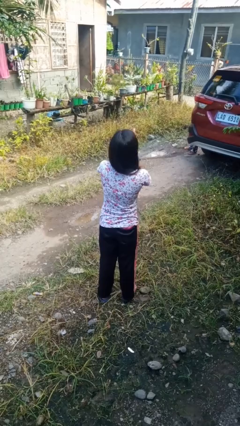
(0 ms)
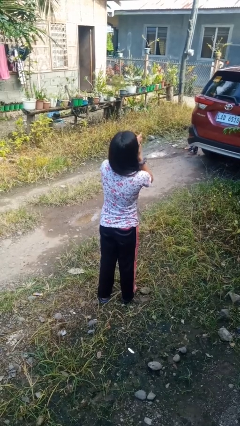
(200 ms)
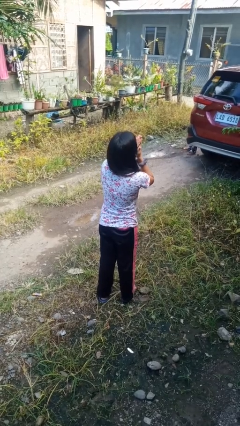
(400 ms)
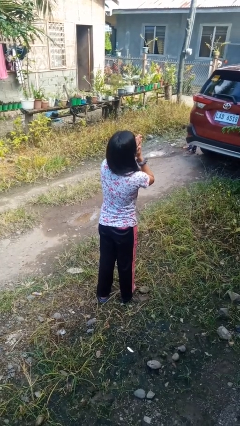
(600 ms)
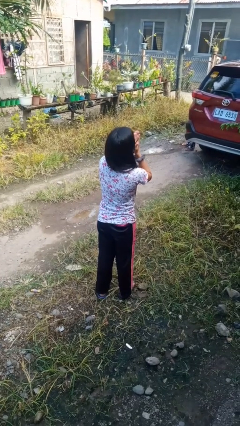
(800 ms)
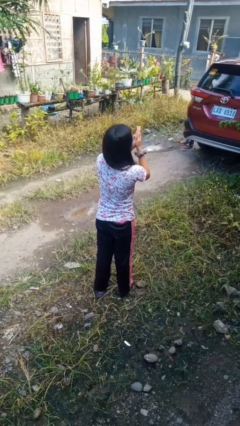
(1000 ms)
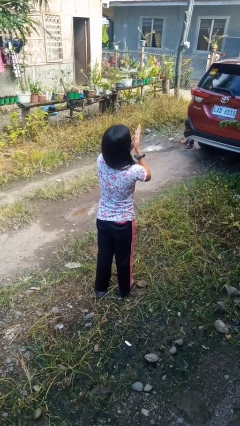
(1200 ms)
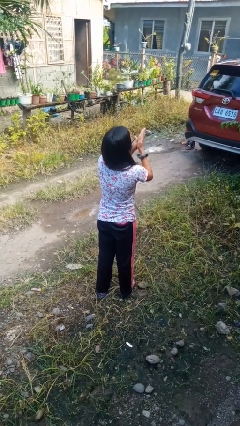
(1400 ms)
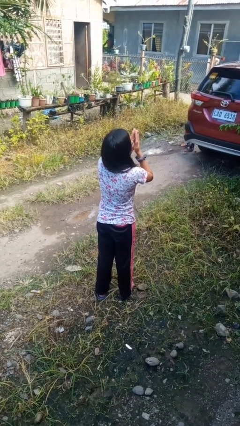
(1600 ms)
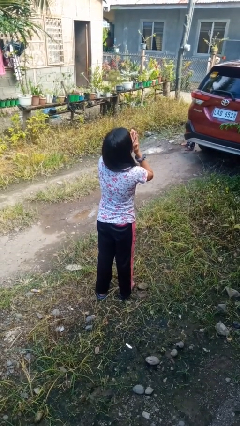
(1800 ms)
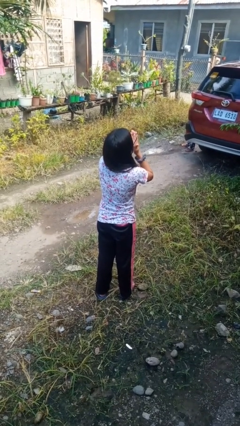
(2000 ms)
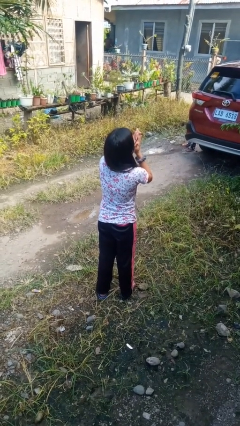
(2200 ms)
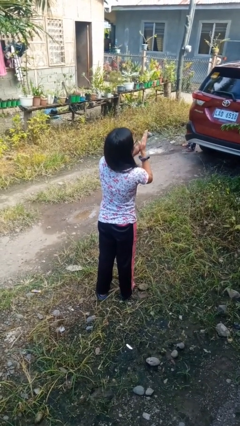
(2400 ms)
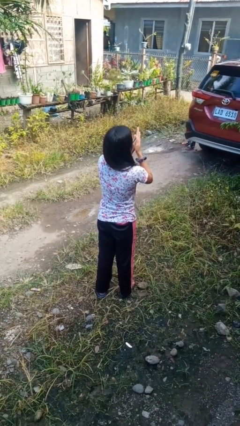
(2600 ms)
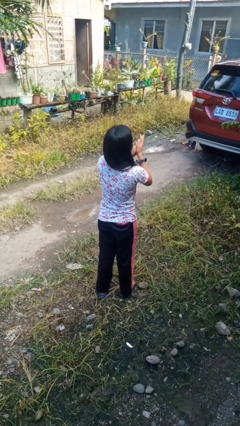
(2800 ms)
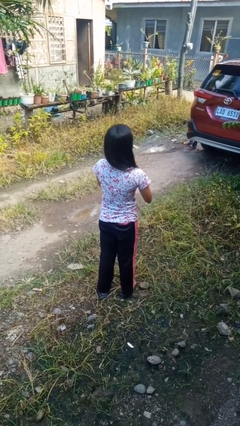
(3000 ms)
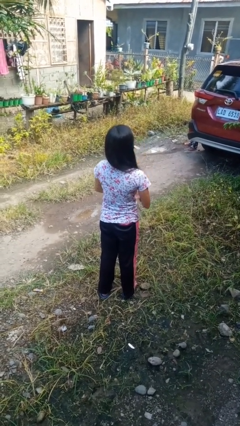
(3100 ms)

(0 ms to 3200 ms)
person blows into hands

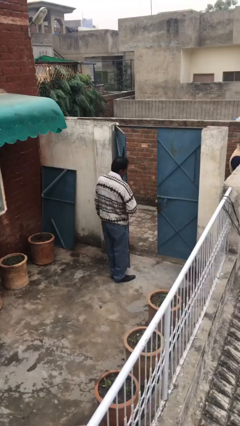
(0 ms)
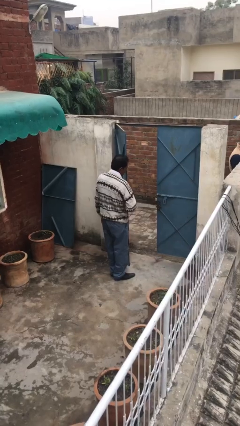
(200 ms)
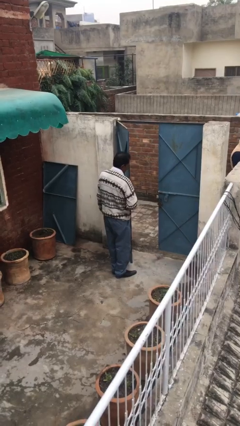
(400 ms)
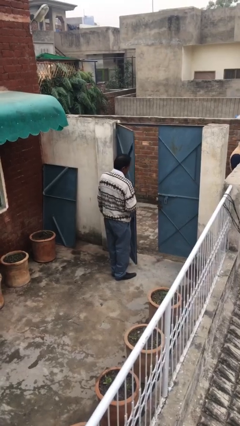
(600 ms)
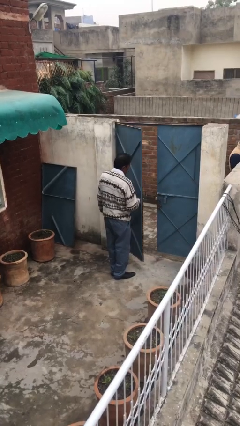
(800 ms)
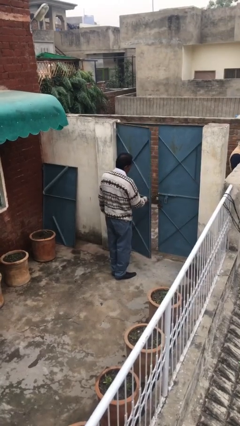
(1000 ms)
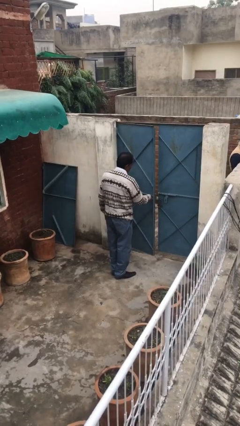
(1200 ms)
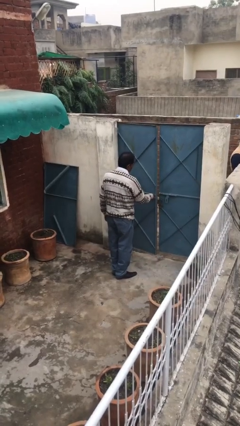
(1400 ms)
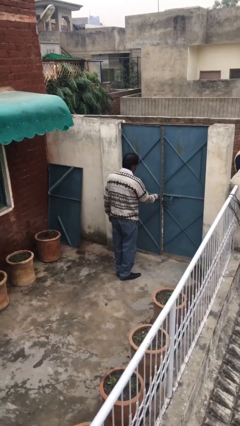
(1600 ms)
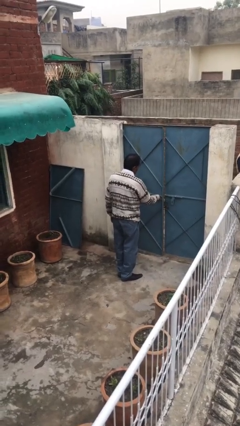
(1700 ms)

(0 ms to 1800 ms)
person closes facility door

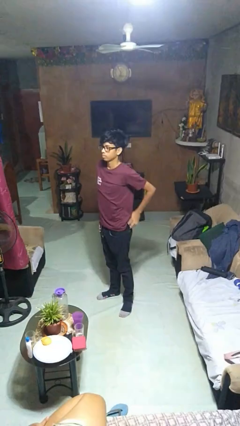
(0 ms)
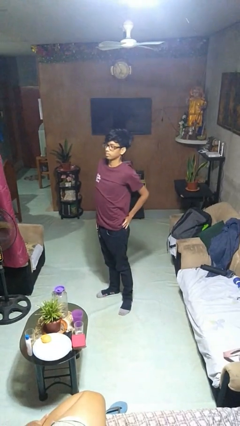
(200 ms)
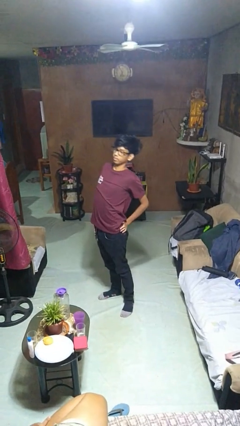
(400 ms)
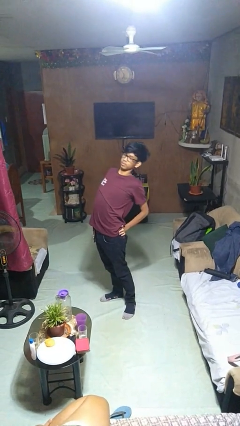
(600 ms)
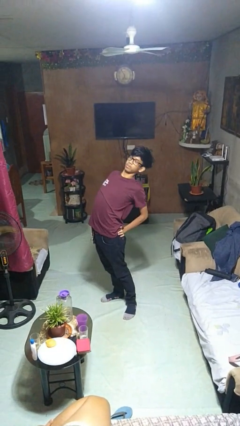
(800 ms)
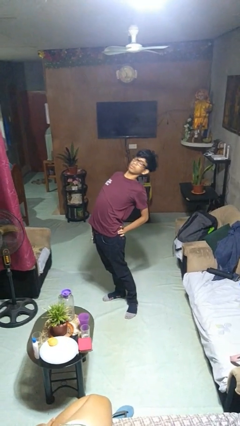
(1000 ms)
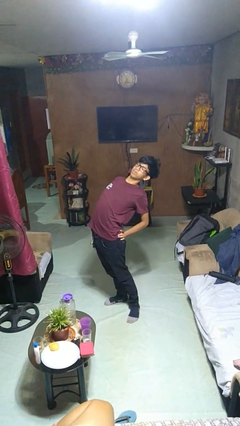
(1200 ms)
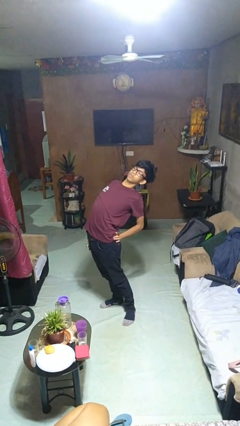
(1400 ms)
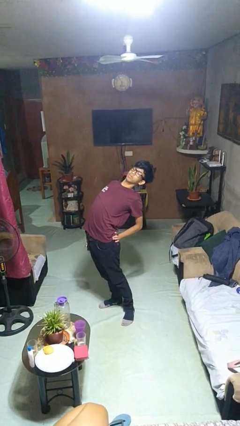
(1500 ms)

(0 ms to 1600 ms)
person stretches back

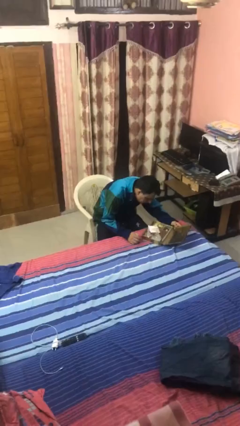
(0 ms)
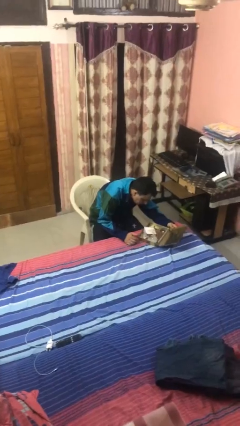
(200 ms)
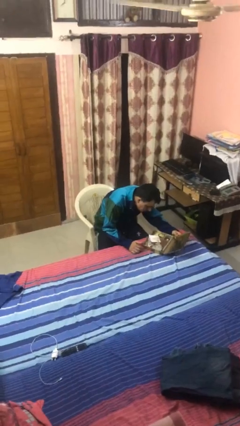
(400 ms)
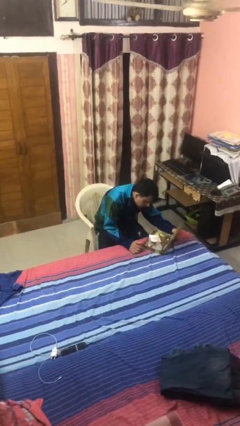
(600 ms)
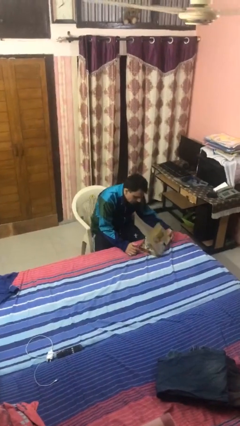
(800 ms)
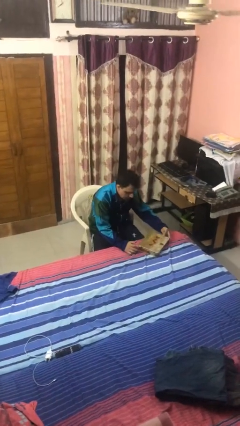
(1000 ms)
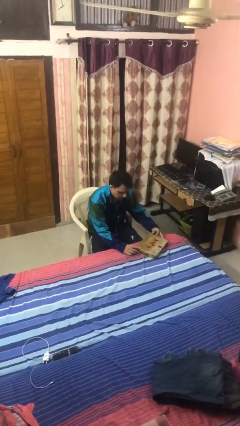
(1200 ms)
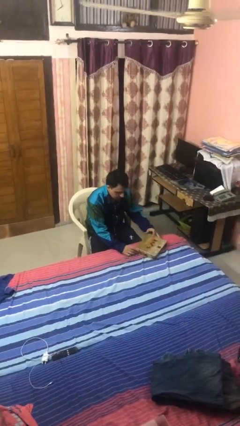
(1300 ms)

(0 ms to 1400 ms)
person closes jewelry box

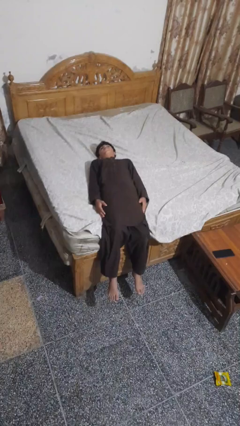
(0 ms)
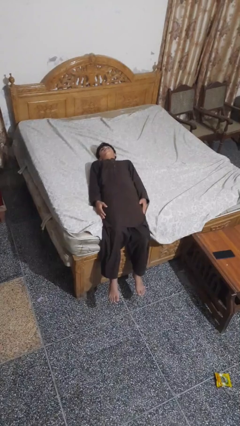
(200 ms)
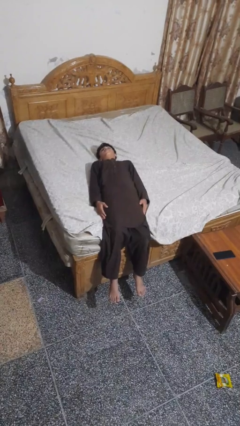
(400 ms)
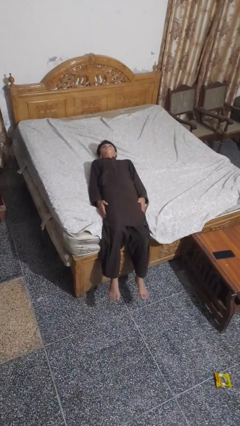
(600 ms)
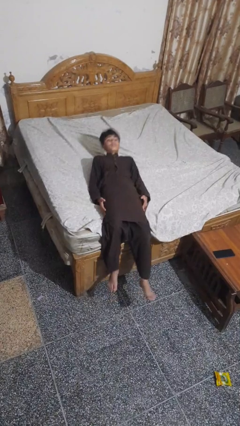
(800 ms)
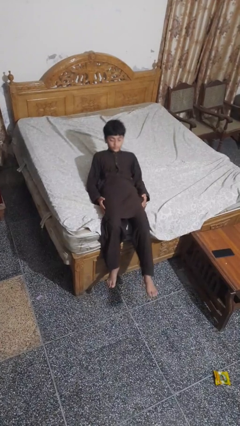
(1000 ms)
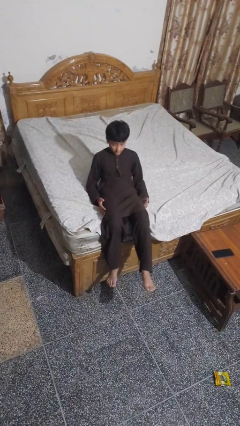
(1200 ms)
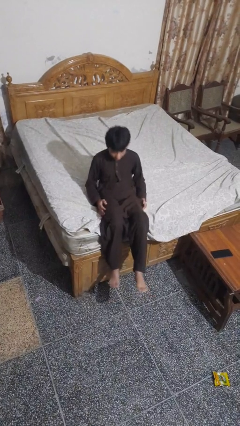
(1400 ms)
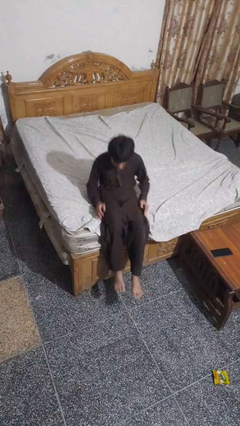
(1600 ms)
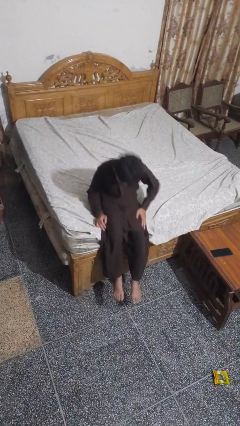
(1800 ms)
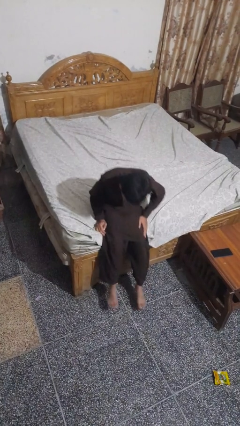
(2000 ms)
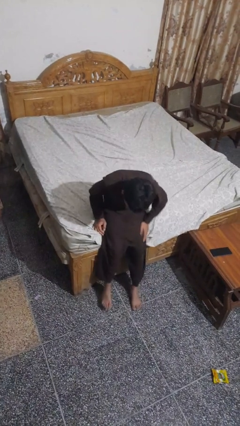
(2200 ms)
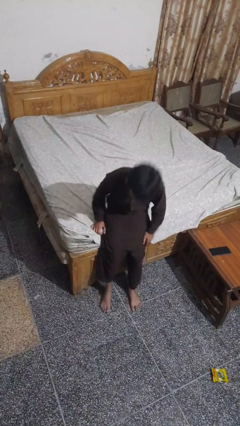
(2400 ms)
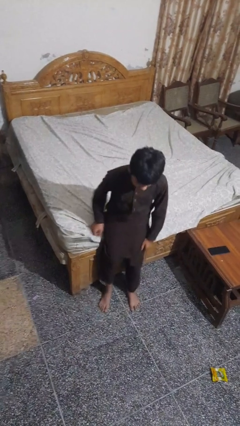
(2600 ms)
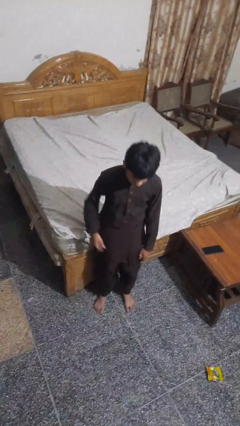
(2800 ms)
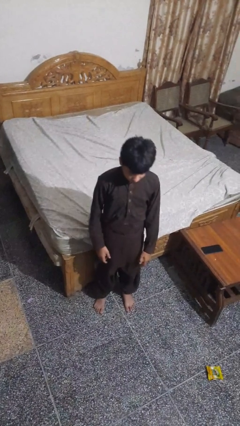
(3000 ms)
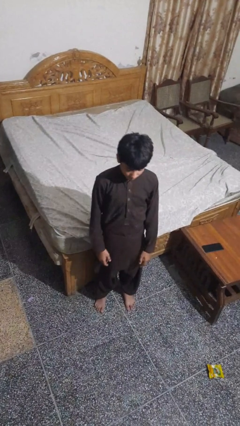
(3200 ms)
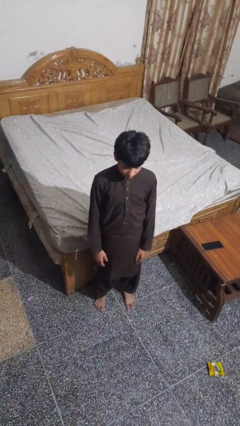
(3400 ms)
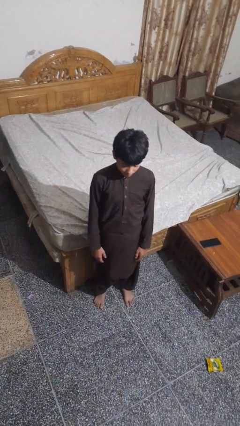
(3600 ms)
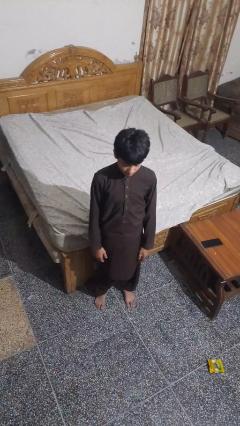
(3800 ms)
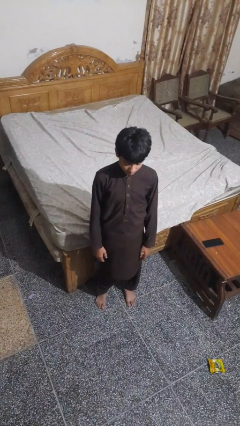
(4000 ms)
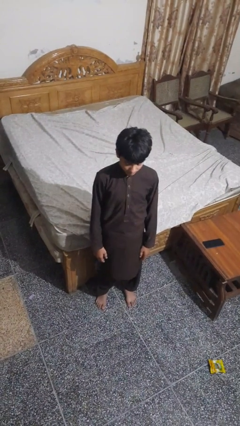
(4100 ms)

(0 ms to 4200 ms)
person stands up

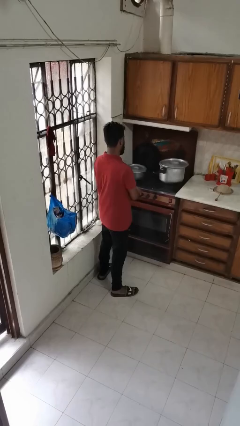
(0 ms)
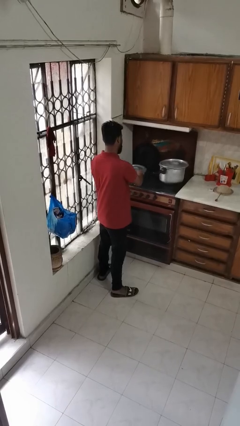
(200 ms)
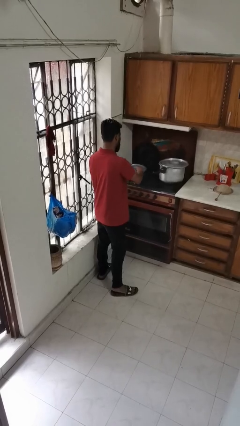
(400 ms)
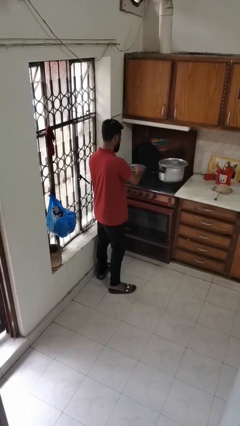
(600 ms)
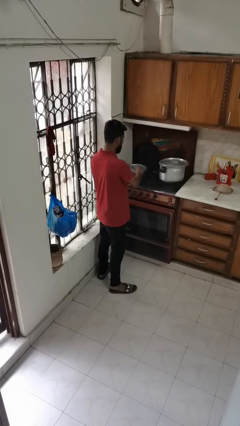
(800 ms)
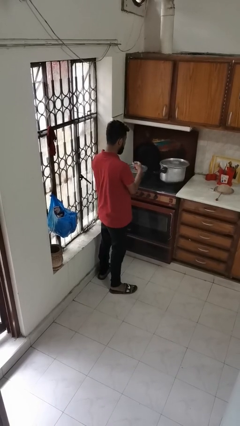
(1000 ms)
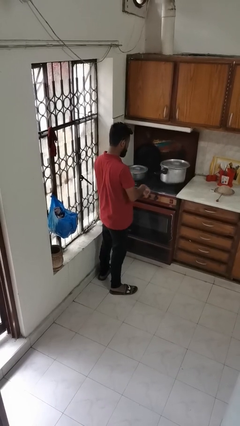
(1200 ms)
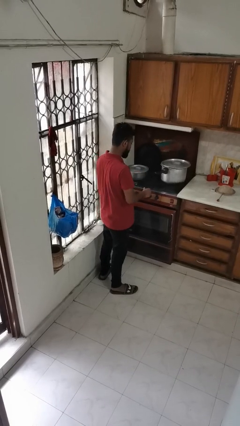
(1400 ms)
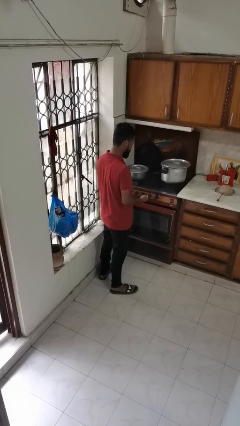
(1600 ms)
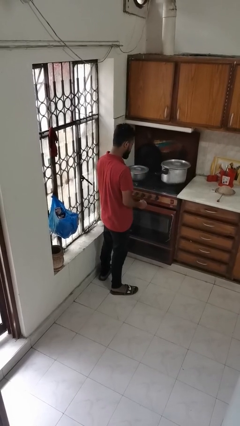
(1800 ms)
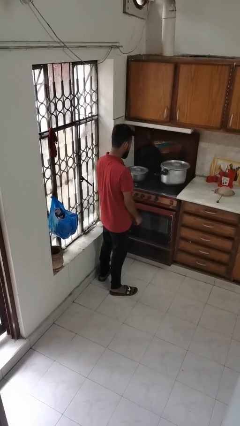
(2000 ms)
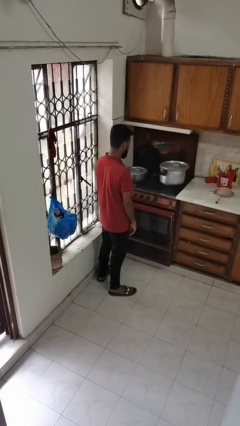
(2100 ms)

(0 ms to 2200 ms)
person burns hand

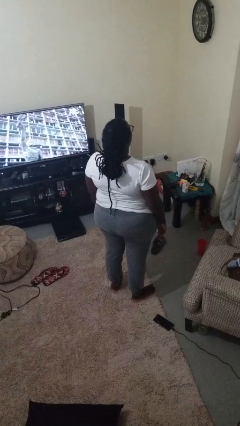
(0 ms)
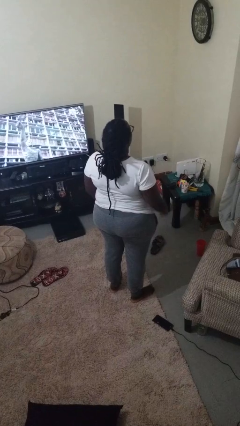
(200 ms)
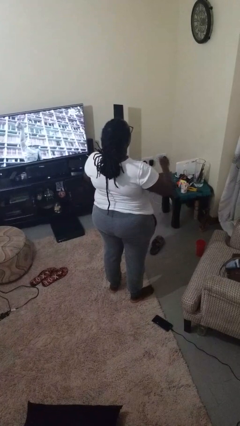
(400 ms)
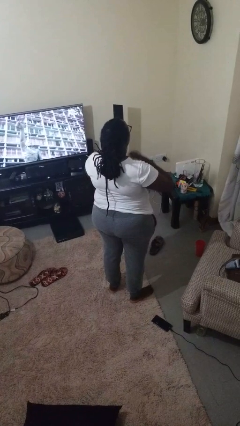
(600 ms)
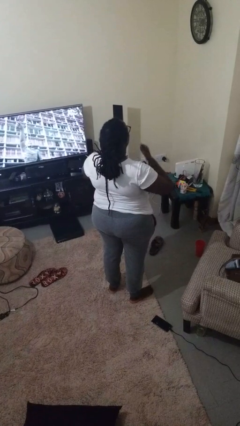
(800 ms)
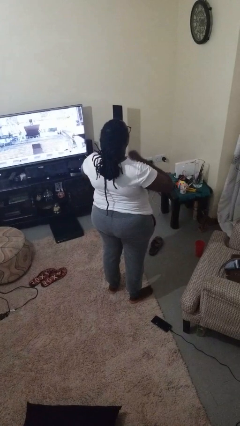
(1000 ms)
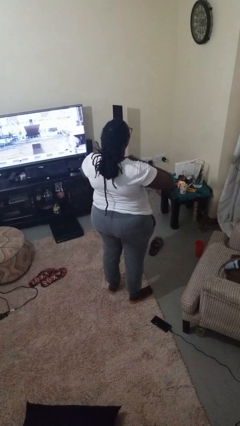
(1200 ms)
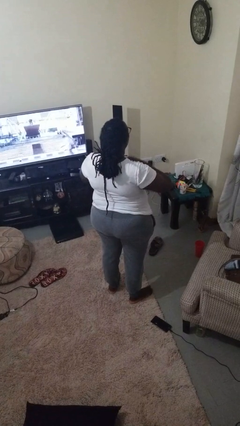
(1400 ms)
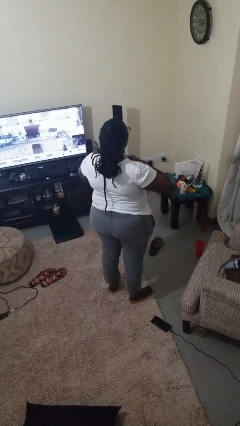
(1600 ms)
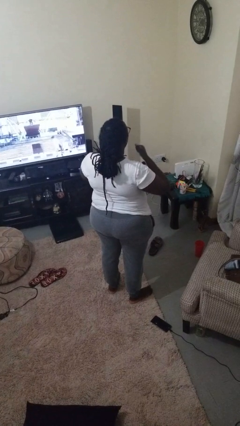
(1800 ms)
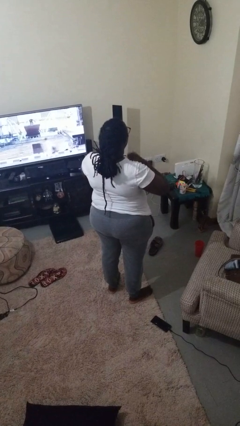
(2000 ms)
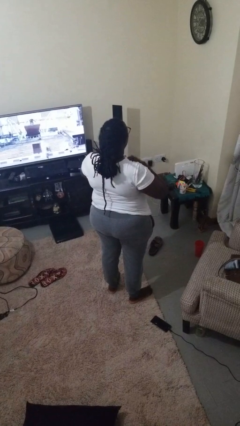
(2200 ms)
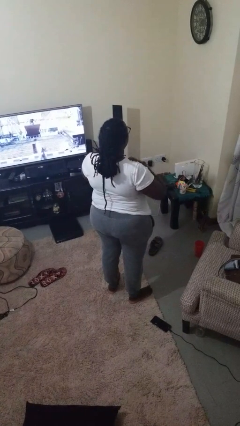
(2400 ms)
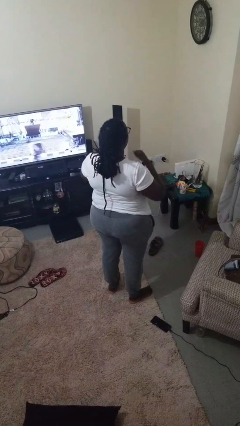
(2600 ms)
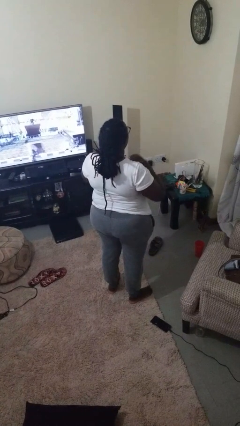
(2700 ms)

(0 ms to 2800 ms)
person drums on chest

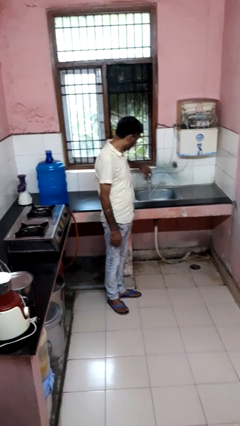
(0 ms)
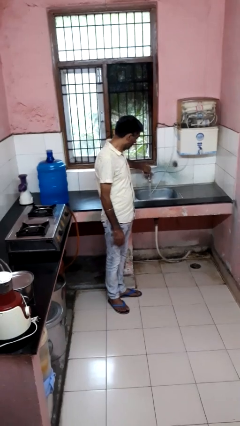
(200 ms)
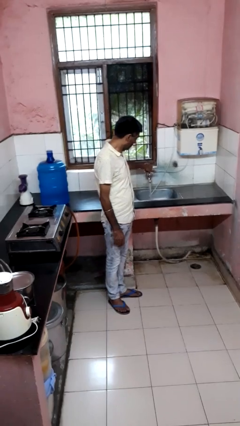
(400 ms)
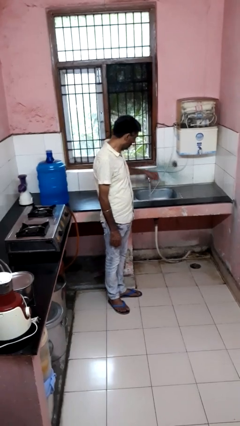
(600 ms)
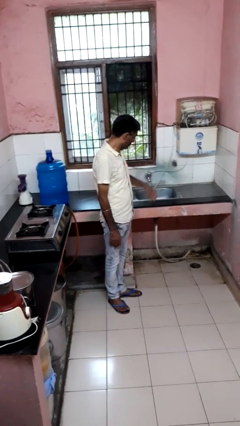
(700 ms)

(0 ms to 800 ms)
person turns on faucet
